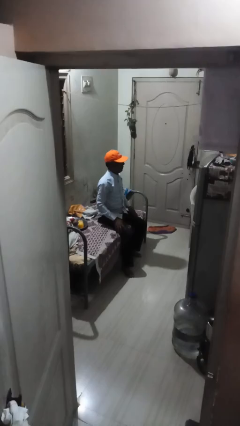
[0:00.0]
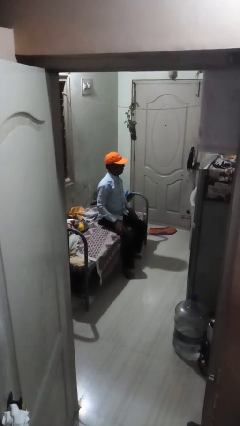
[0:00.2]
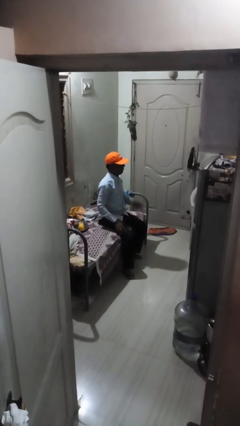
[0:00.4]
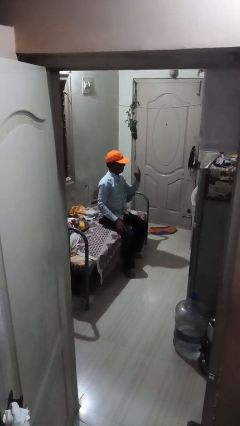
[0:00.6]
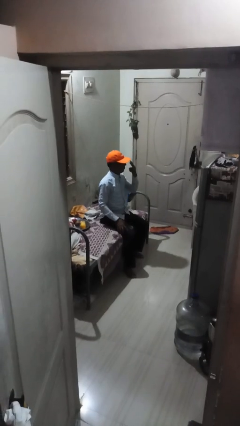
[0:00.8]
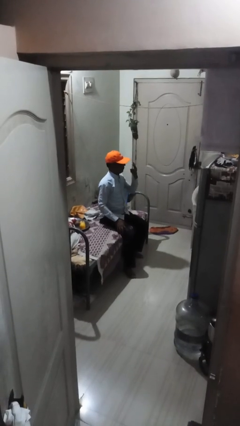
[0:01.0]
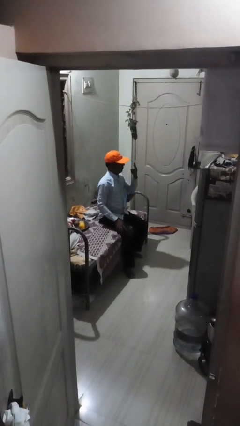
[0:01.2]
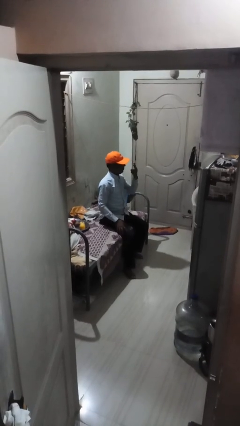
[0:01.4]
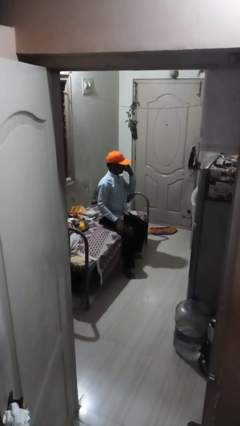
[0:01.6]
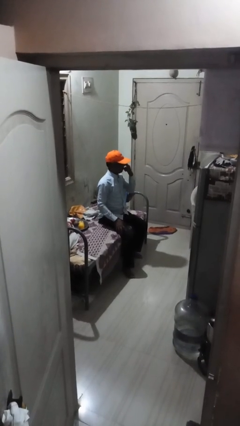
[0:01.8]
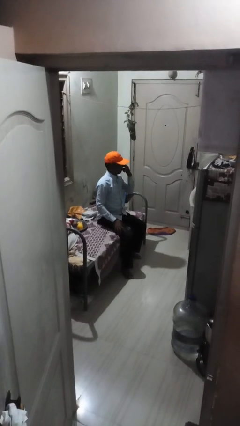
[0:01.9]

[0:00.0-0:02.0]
person gestures watch closely

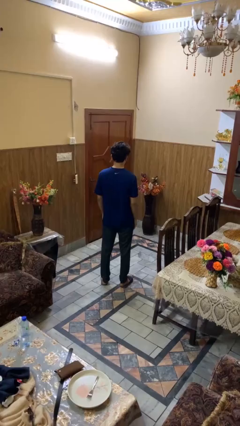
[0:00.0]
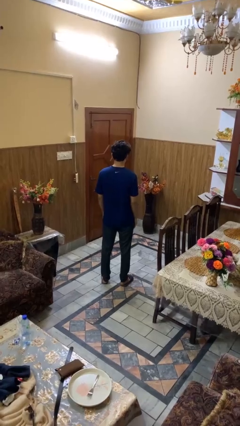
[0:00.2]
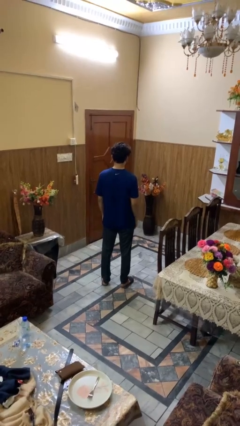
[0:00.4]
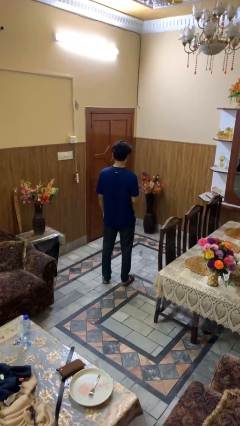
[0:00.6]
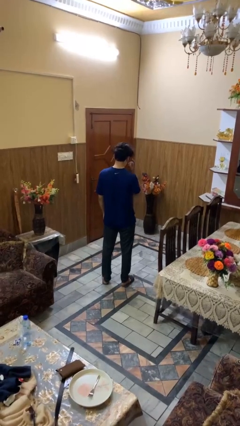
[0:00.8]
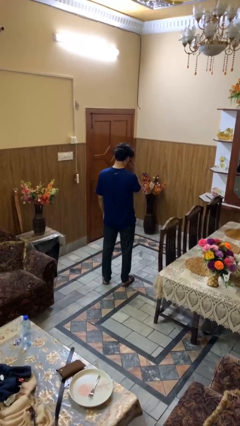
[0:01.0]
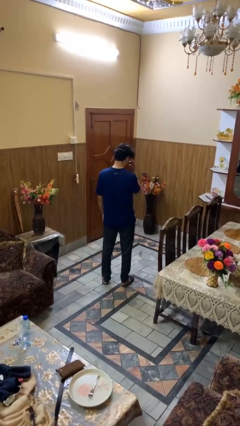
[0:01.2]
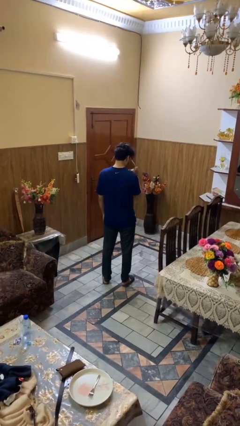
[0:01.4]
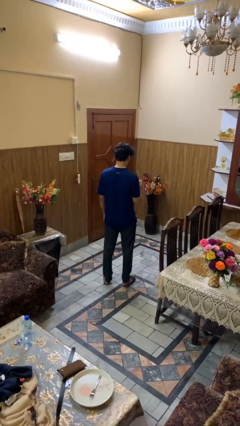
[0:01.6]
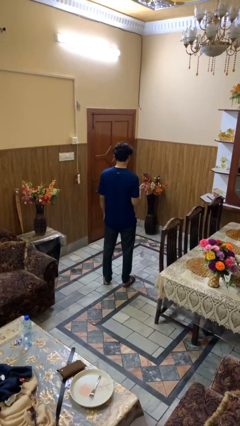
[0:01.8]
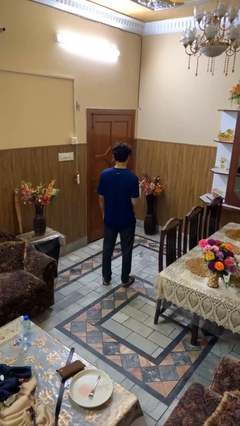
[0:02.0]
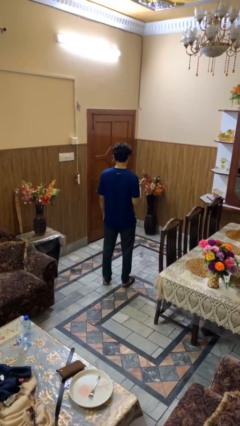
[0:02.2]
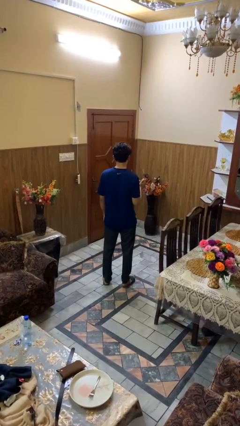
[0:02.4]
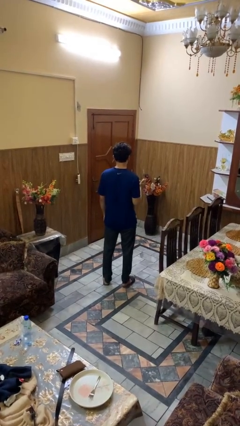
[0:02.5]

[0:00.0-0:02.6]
person takes off sunglasses

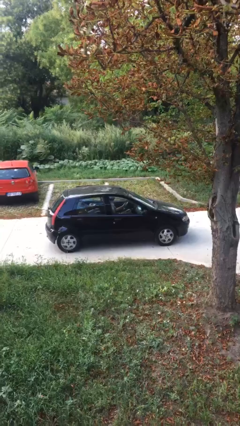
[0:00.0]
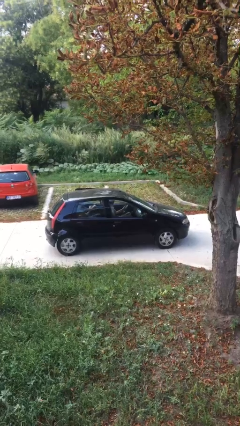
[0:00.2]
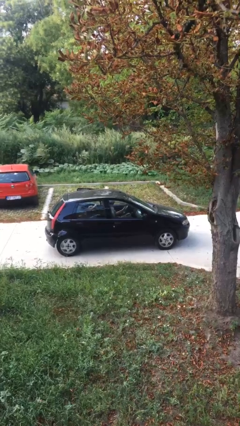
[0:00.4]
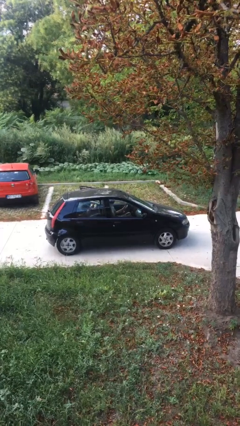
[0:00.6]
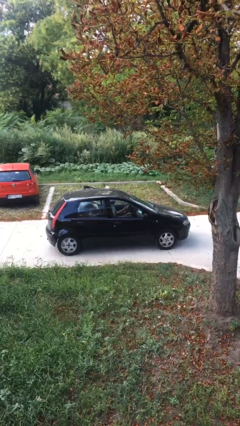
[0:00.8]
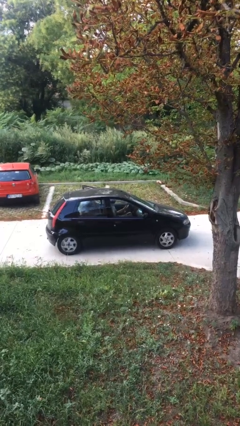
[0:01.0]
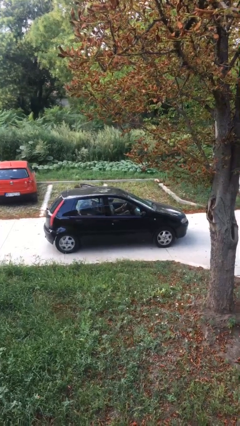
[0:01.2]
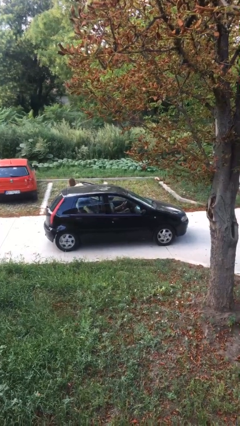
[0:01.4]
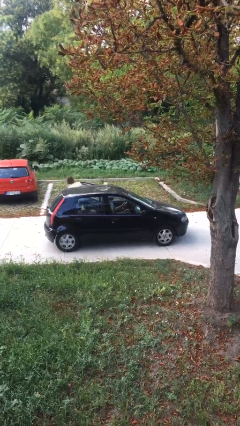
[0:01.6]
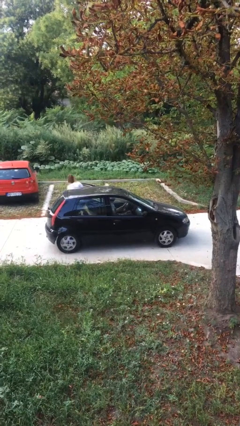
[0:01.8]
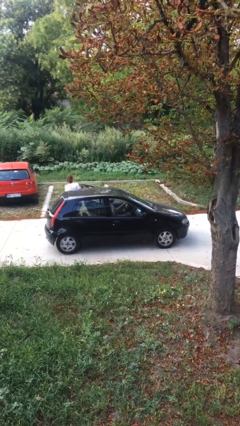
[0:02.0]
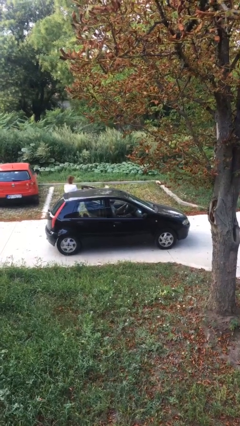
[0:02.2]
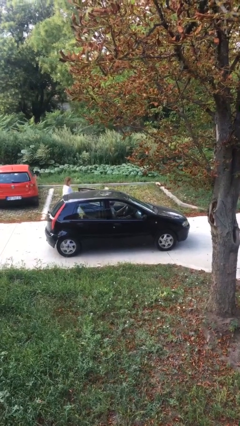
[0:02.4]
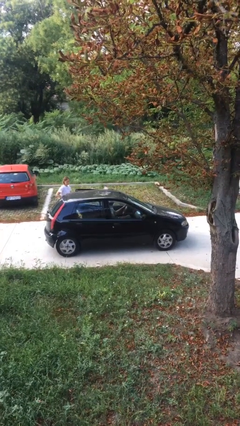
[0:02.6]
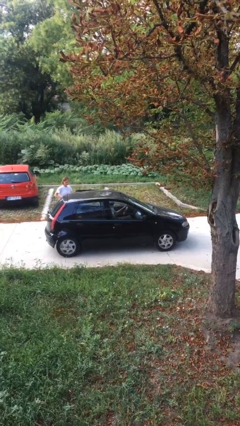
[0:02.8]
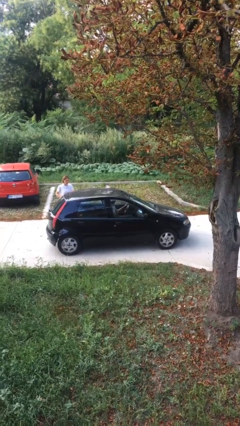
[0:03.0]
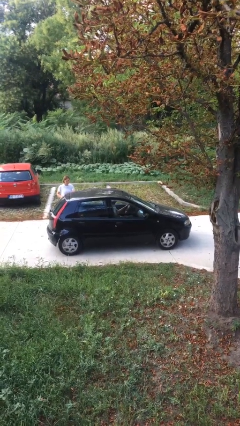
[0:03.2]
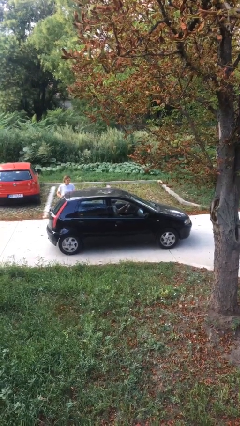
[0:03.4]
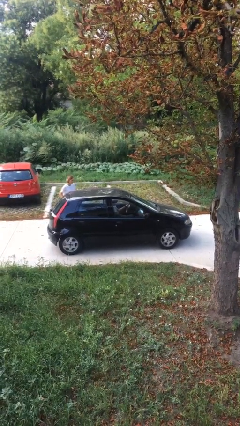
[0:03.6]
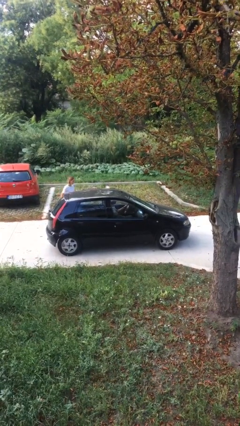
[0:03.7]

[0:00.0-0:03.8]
car drops off person

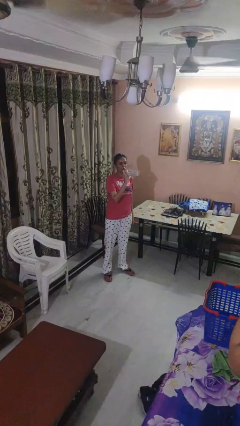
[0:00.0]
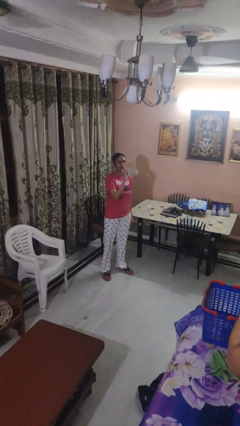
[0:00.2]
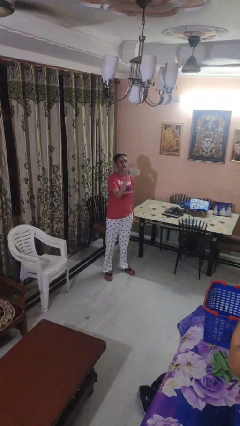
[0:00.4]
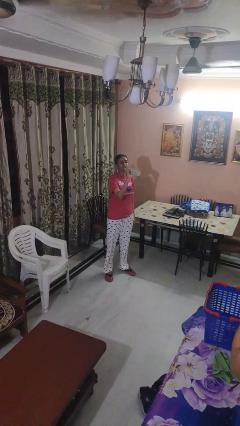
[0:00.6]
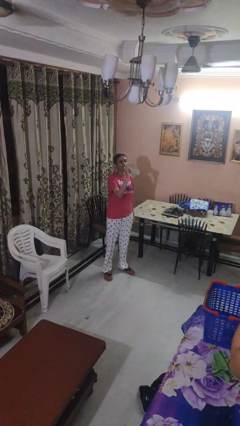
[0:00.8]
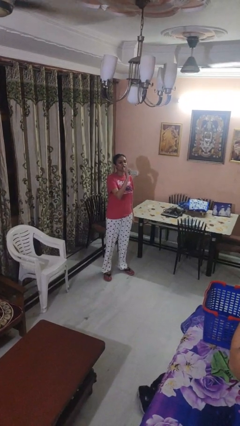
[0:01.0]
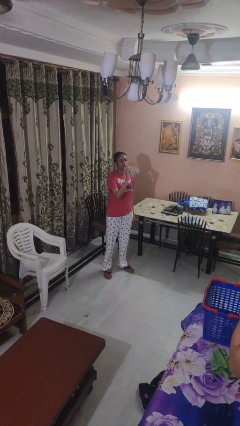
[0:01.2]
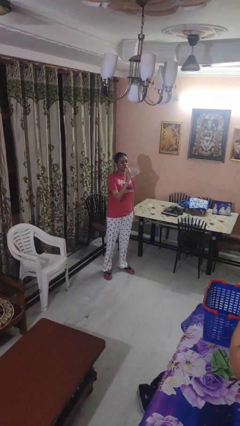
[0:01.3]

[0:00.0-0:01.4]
person drinks from bottle

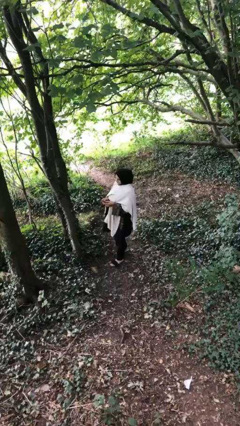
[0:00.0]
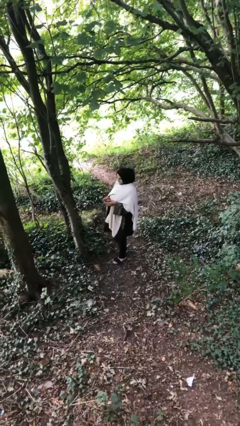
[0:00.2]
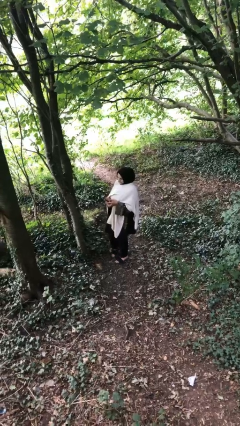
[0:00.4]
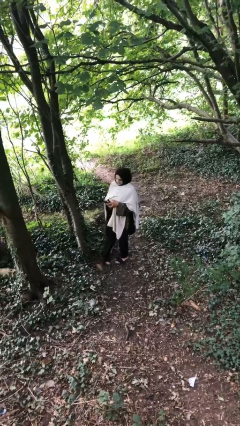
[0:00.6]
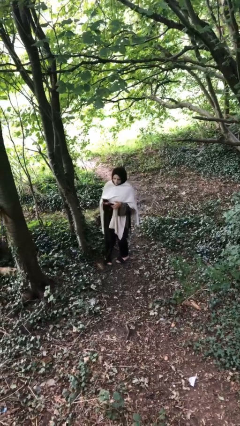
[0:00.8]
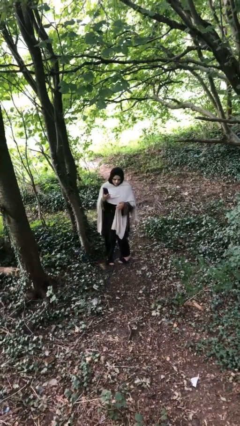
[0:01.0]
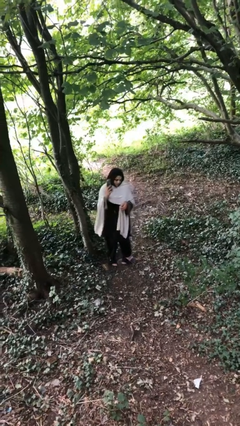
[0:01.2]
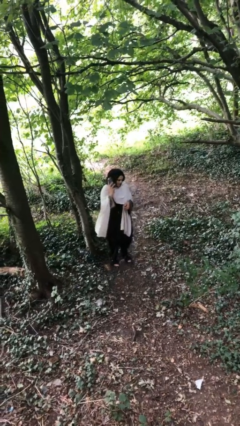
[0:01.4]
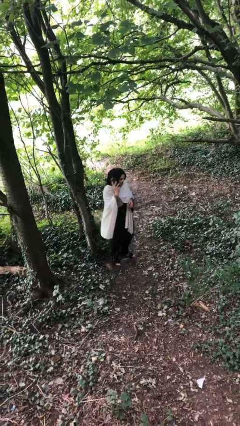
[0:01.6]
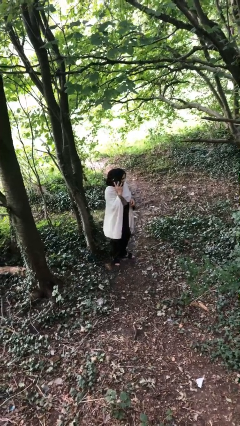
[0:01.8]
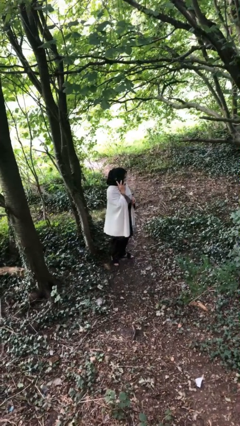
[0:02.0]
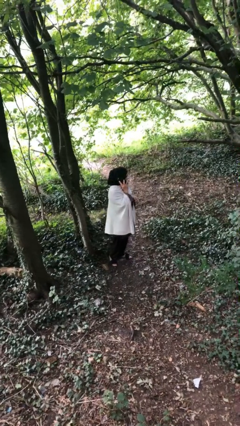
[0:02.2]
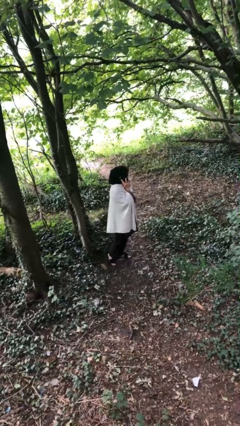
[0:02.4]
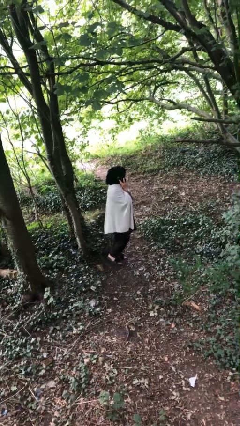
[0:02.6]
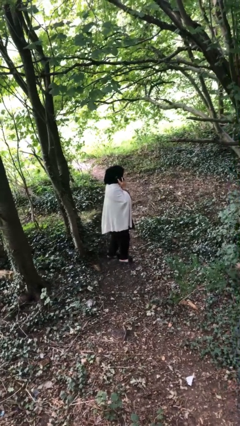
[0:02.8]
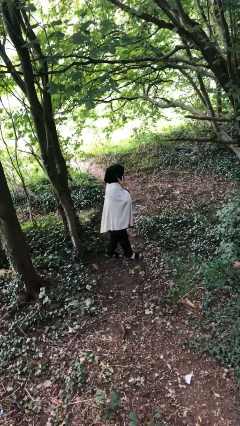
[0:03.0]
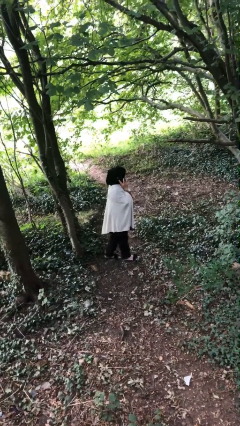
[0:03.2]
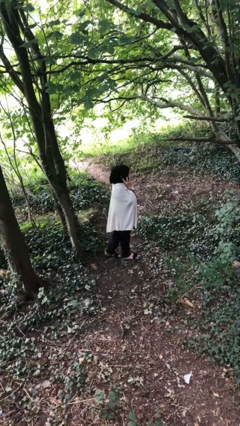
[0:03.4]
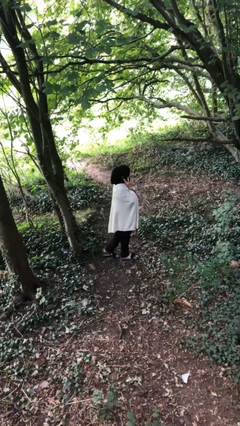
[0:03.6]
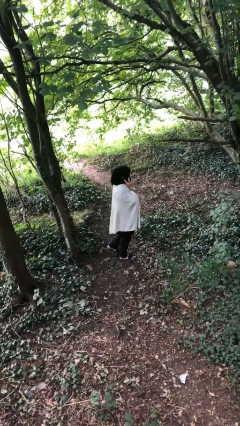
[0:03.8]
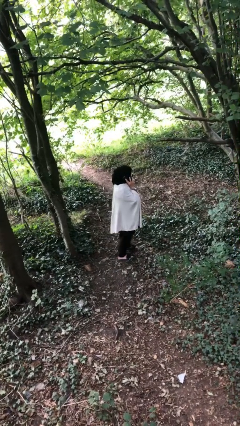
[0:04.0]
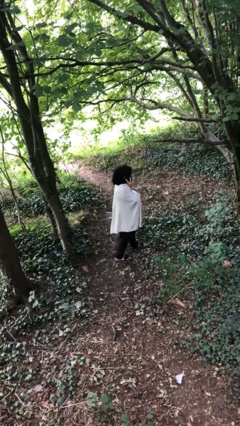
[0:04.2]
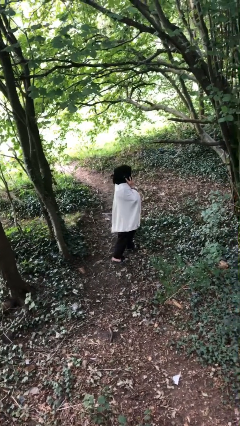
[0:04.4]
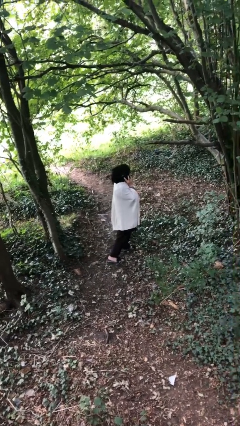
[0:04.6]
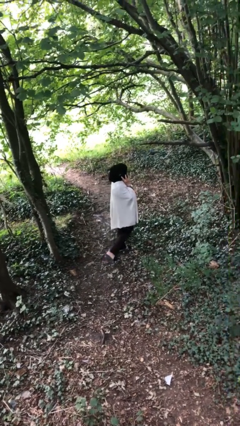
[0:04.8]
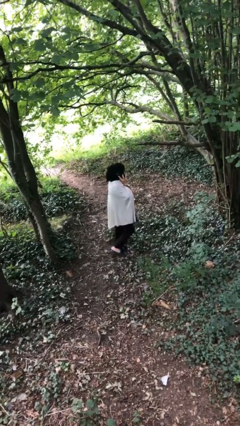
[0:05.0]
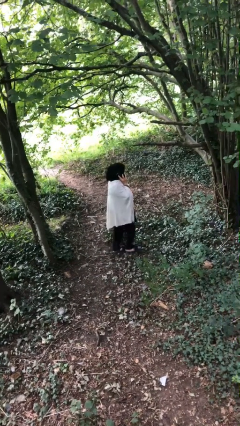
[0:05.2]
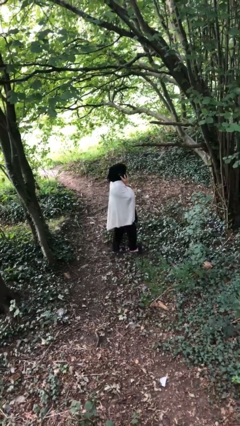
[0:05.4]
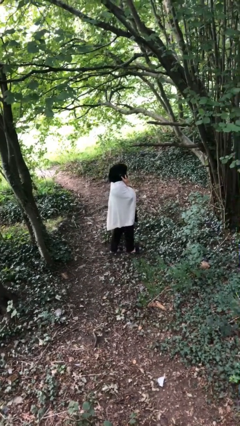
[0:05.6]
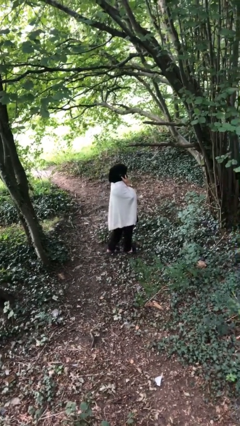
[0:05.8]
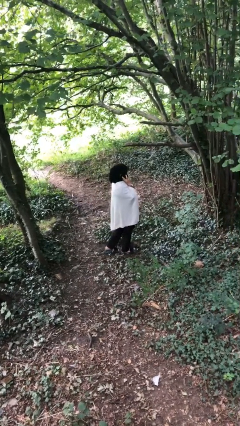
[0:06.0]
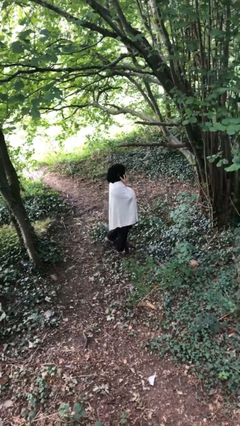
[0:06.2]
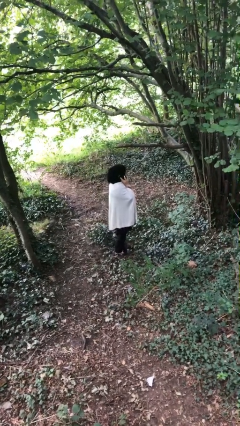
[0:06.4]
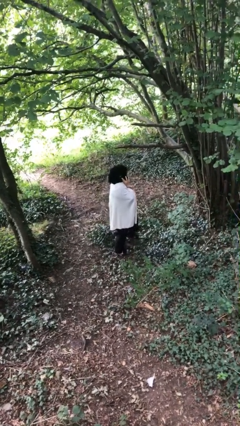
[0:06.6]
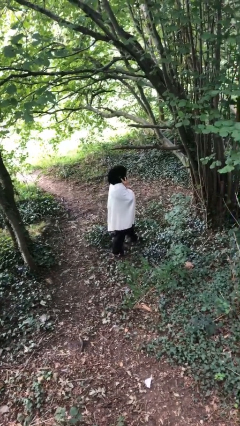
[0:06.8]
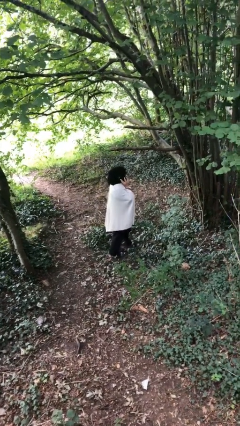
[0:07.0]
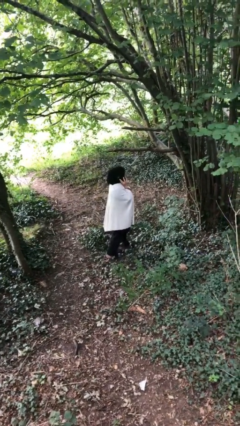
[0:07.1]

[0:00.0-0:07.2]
person talks on phone

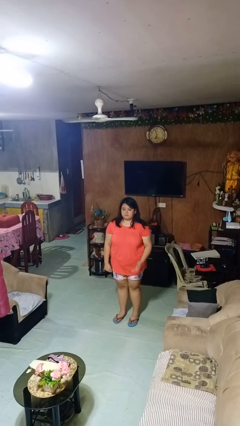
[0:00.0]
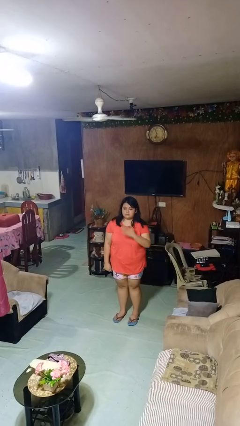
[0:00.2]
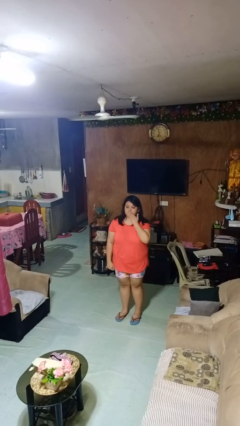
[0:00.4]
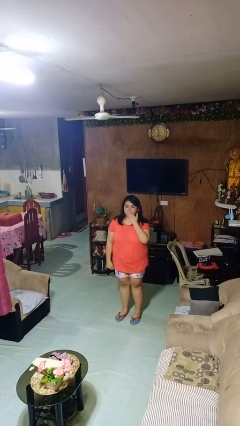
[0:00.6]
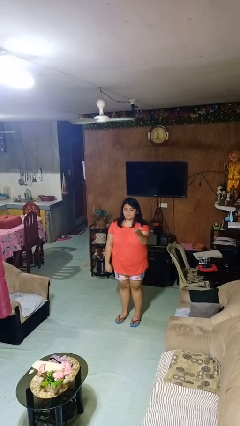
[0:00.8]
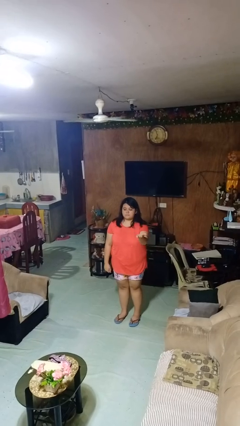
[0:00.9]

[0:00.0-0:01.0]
person gestures blow kiss
